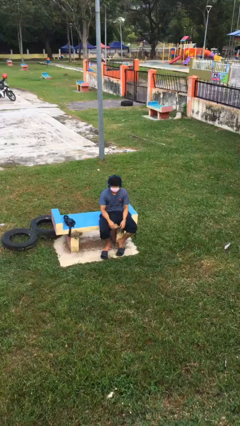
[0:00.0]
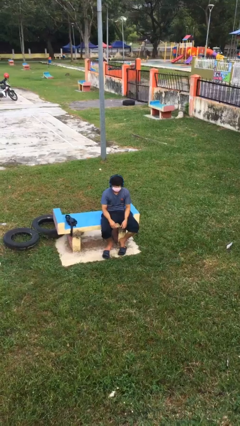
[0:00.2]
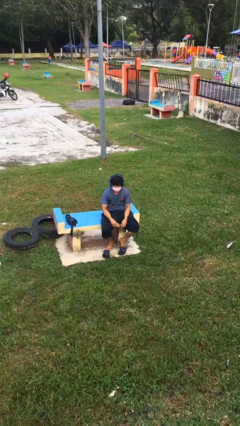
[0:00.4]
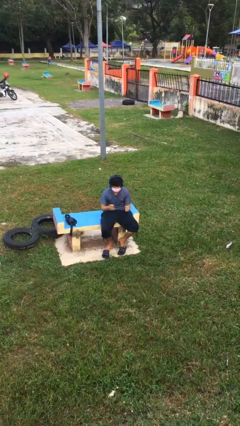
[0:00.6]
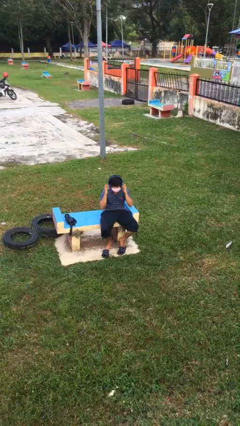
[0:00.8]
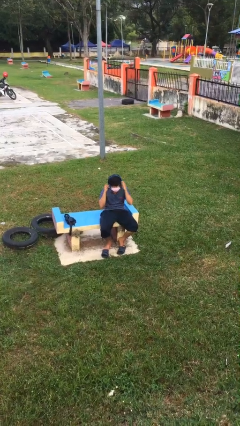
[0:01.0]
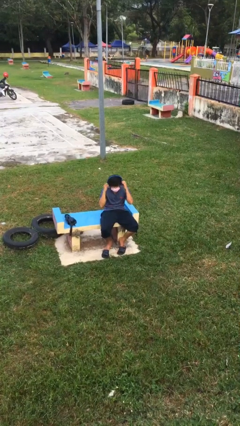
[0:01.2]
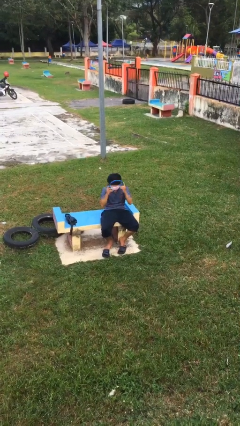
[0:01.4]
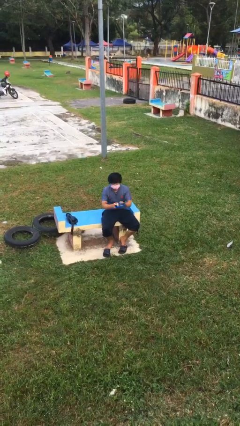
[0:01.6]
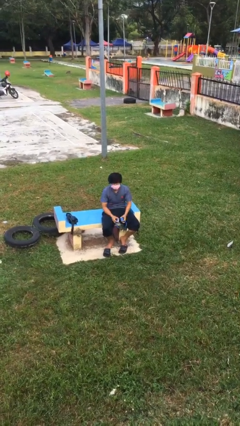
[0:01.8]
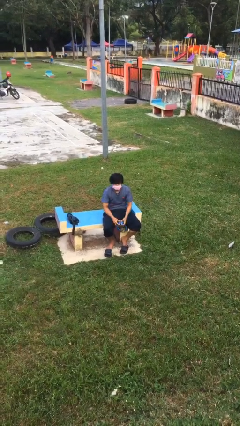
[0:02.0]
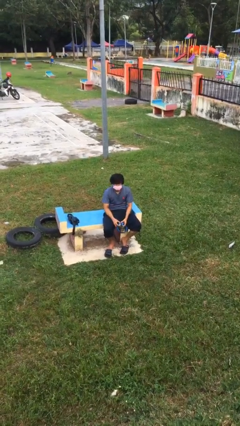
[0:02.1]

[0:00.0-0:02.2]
person takes off headphones

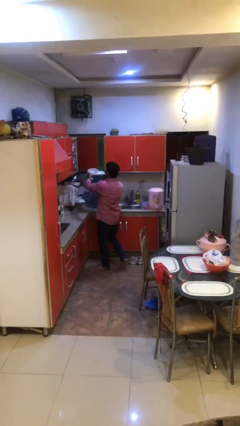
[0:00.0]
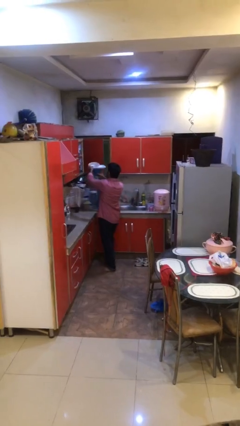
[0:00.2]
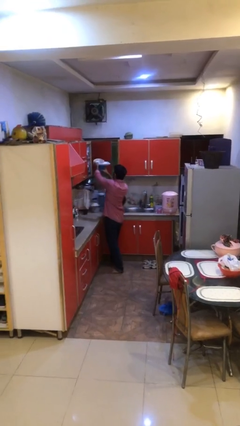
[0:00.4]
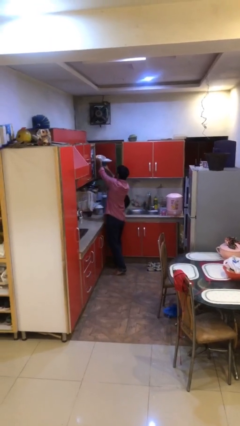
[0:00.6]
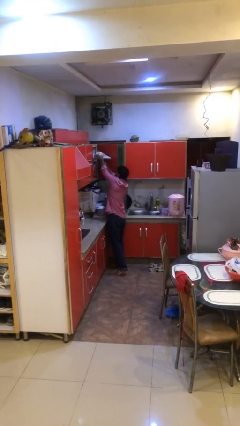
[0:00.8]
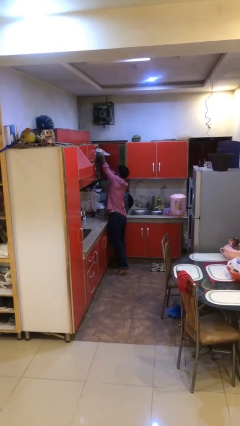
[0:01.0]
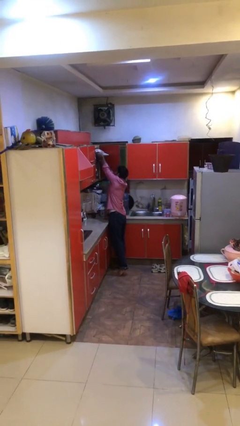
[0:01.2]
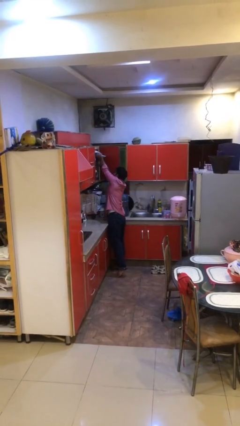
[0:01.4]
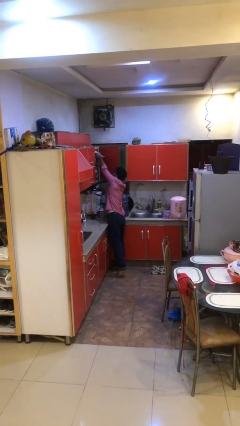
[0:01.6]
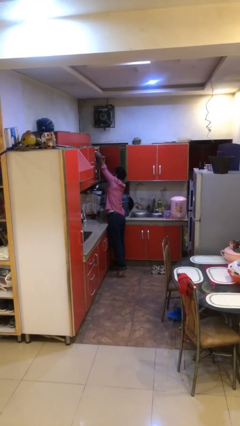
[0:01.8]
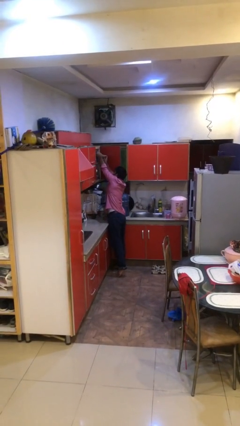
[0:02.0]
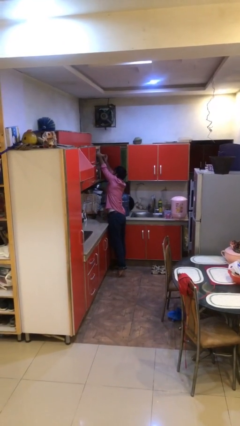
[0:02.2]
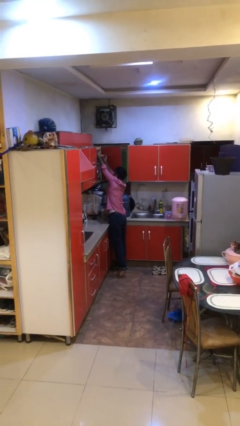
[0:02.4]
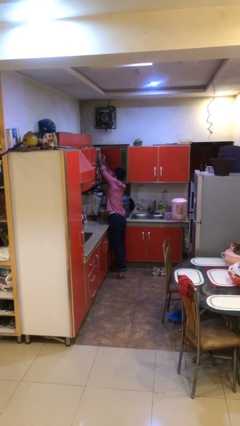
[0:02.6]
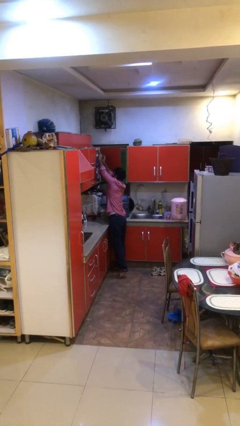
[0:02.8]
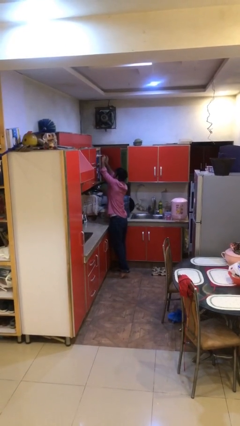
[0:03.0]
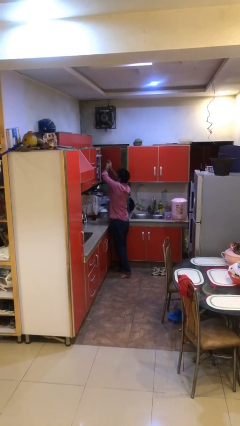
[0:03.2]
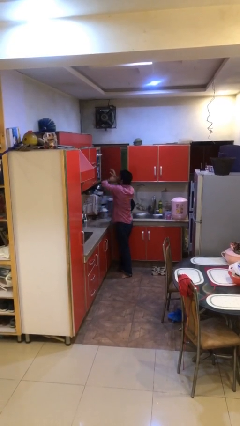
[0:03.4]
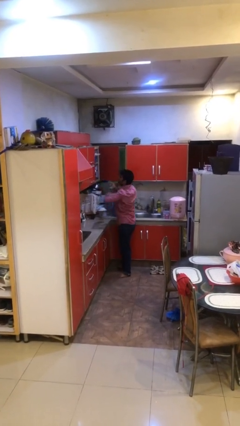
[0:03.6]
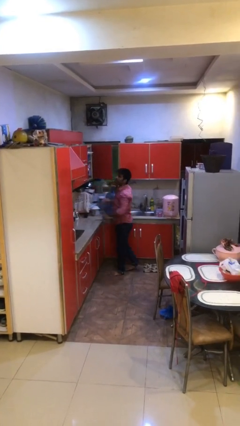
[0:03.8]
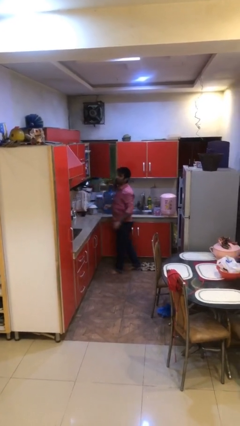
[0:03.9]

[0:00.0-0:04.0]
person puts down object on shelf

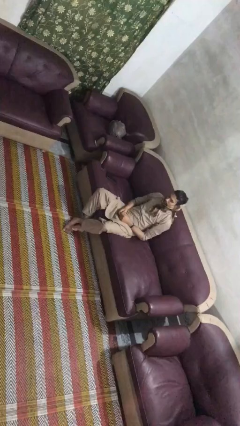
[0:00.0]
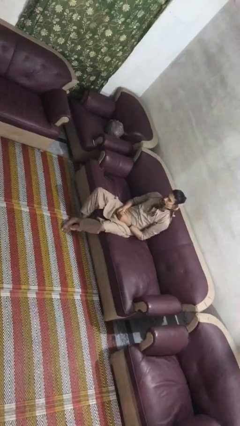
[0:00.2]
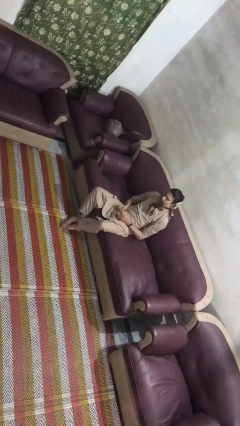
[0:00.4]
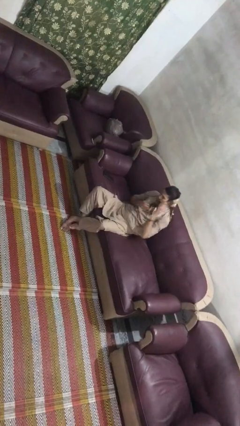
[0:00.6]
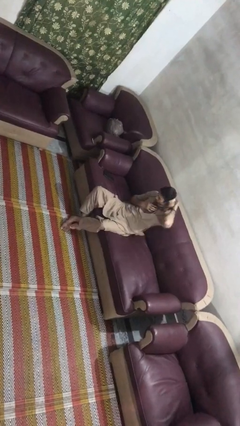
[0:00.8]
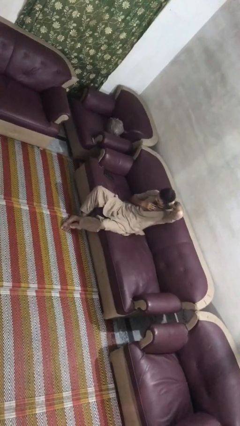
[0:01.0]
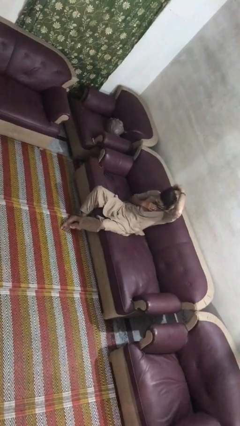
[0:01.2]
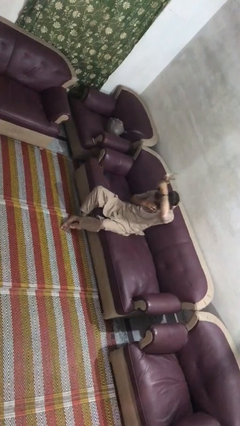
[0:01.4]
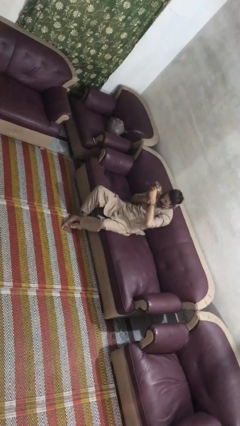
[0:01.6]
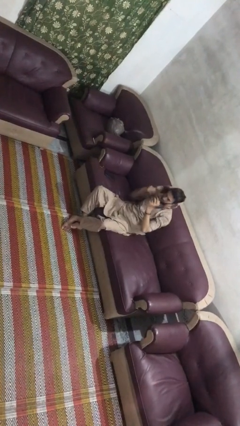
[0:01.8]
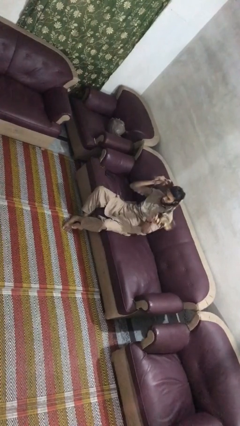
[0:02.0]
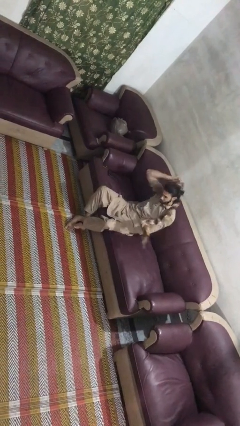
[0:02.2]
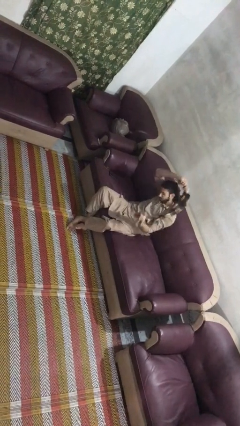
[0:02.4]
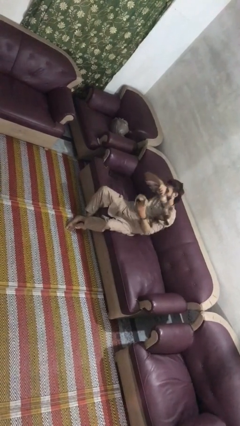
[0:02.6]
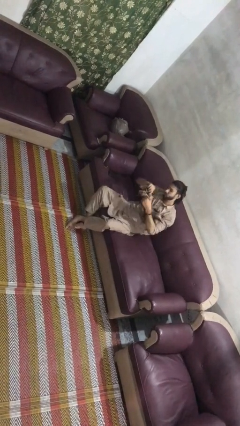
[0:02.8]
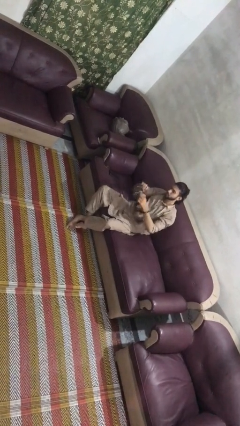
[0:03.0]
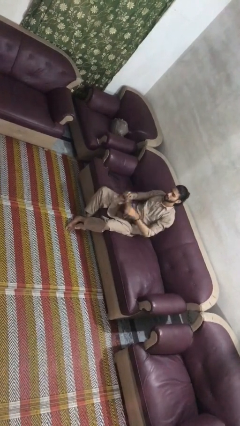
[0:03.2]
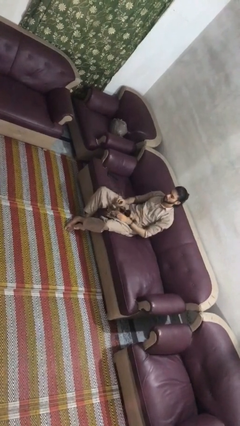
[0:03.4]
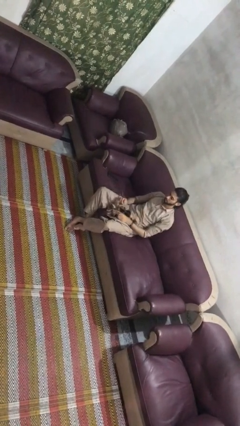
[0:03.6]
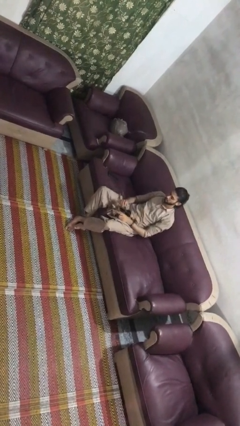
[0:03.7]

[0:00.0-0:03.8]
person takes off scarf

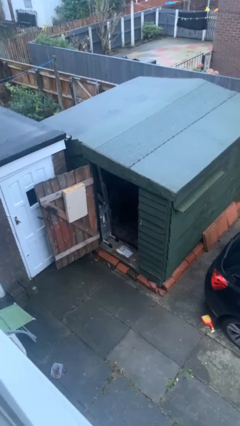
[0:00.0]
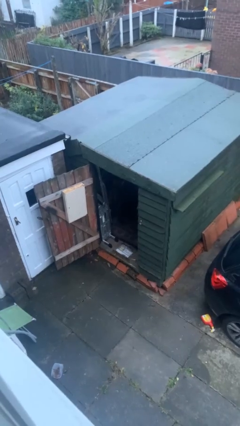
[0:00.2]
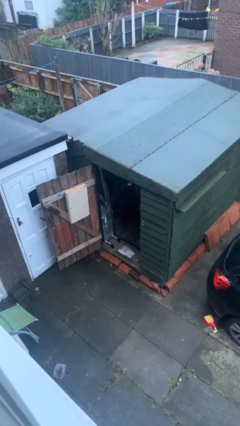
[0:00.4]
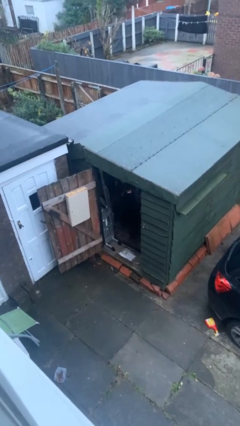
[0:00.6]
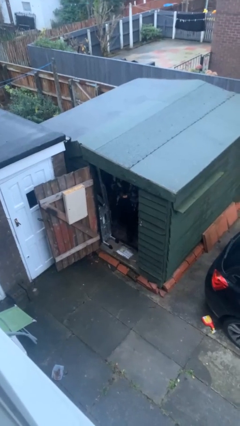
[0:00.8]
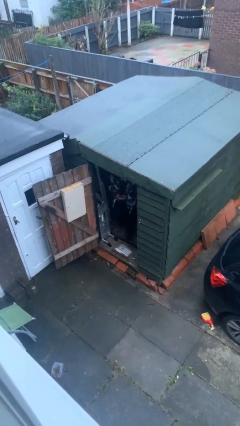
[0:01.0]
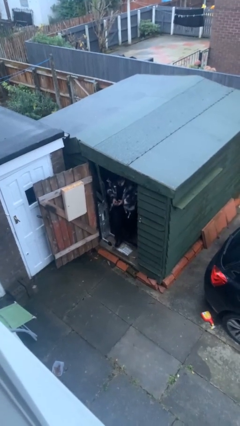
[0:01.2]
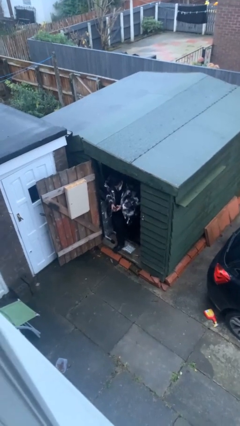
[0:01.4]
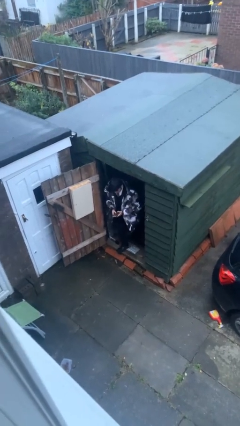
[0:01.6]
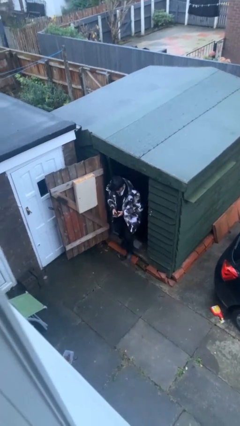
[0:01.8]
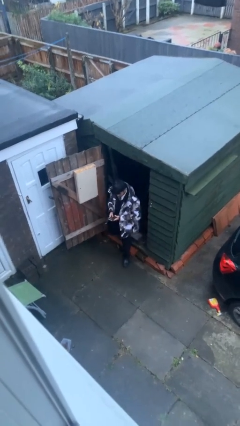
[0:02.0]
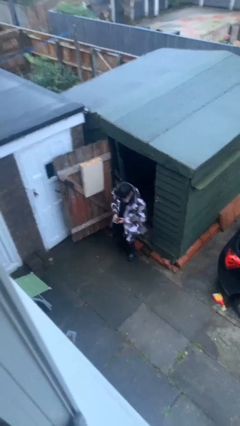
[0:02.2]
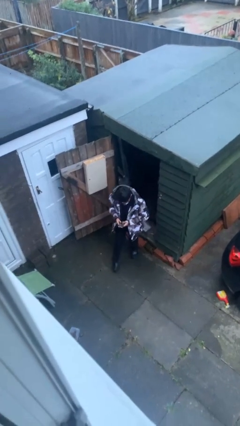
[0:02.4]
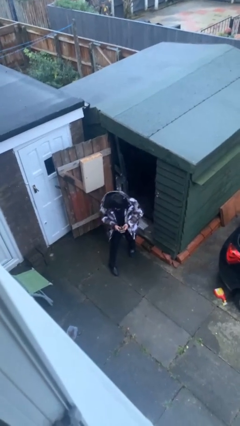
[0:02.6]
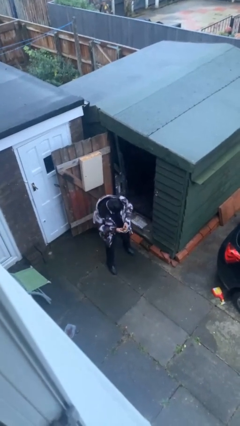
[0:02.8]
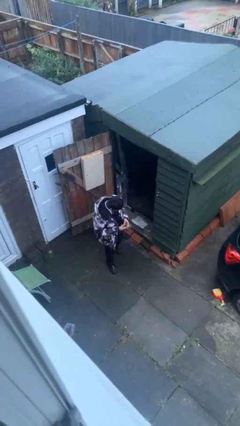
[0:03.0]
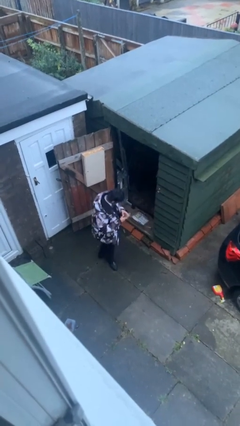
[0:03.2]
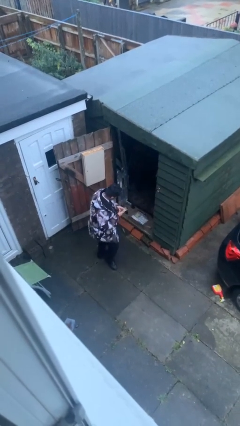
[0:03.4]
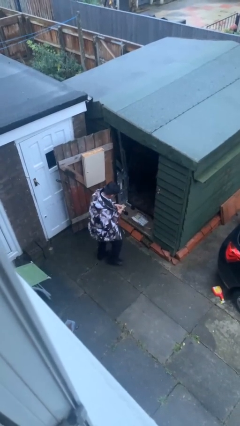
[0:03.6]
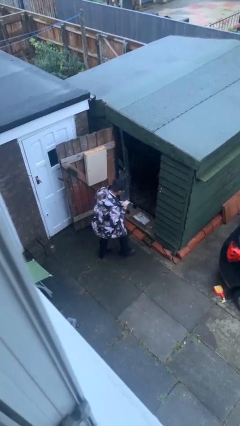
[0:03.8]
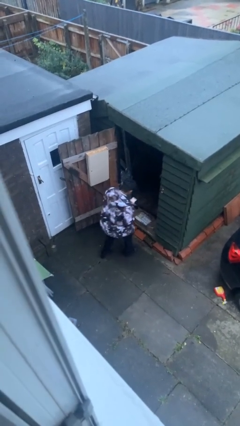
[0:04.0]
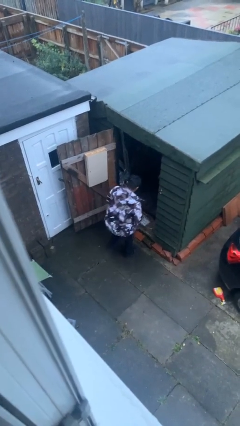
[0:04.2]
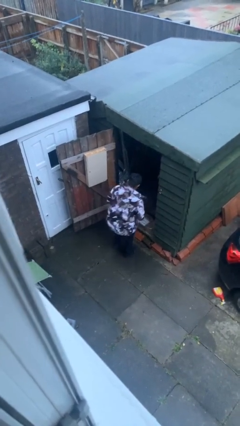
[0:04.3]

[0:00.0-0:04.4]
person enters scene through structure

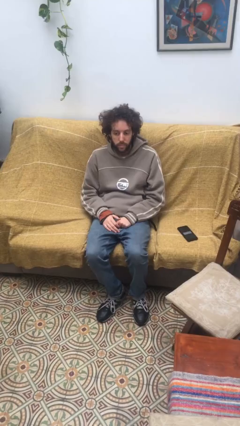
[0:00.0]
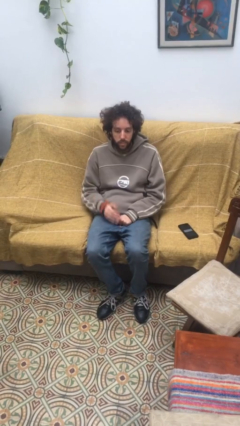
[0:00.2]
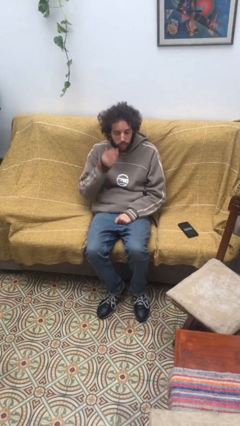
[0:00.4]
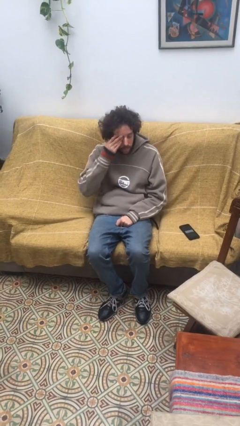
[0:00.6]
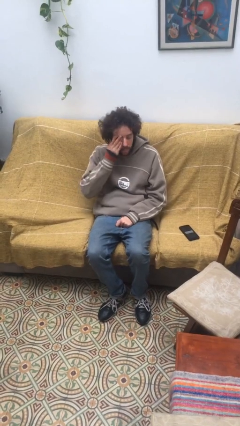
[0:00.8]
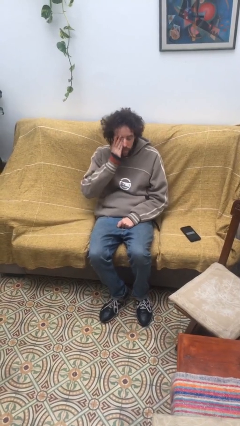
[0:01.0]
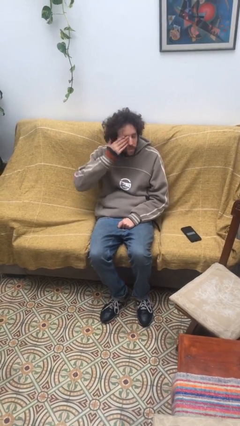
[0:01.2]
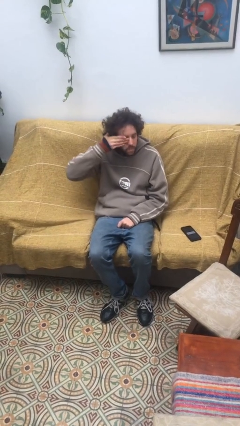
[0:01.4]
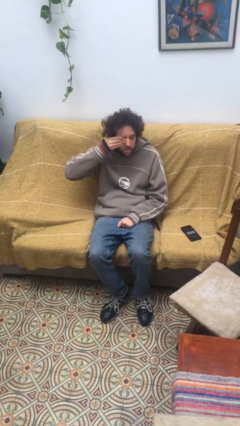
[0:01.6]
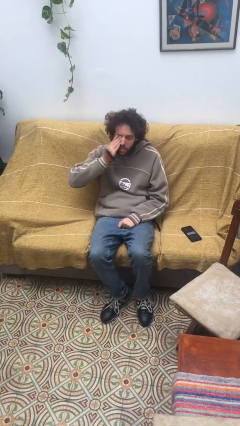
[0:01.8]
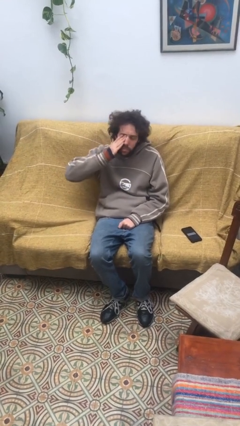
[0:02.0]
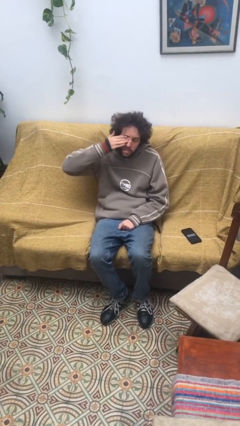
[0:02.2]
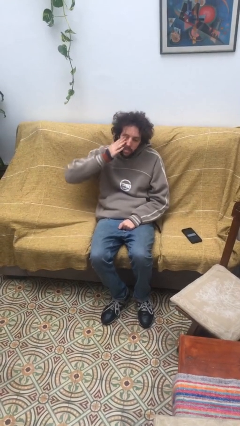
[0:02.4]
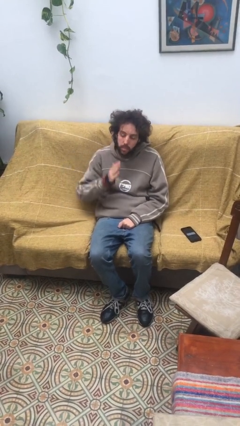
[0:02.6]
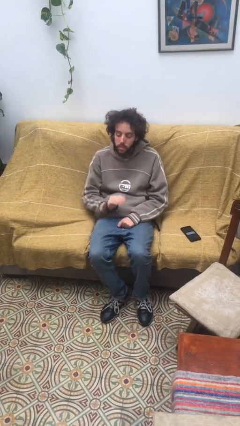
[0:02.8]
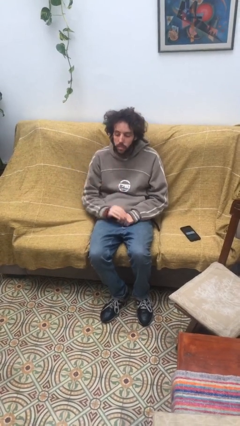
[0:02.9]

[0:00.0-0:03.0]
person rubs eyes

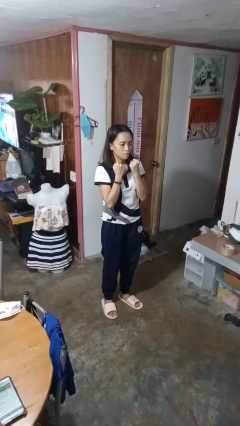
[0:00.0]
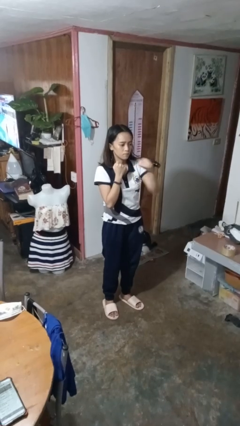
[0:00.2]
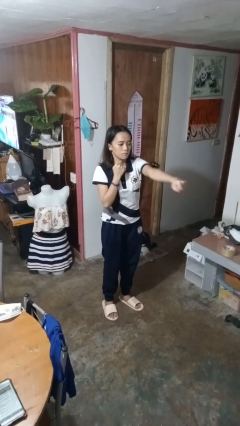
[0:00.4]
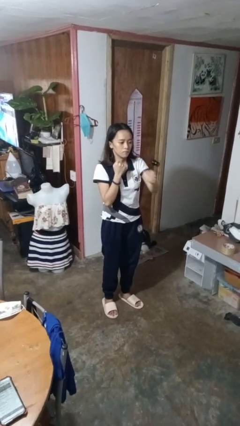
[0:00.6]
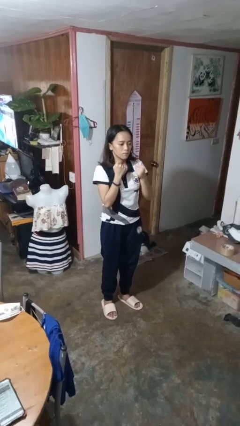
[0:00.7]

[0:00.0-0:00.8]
person punches
